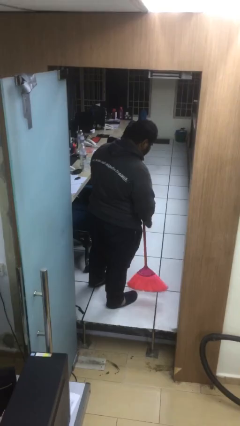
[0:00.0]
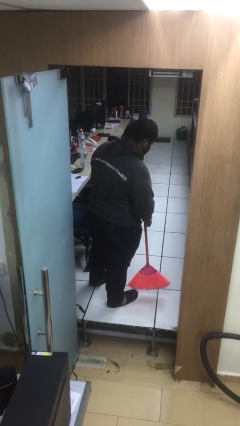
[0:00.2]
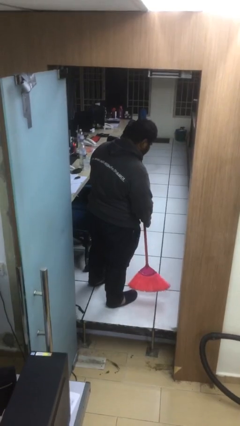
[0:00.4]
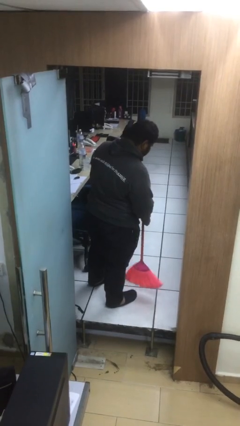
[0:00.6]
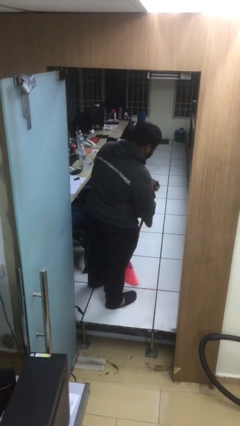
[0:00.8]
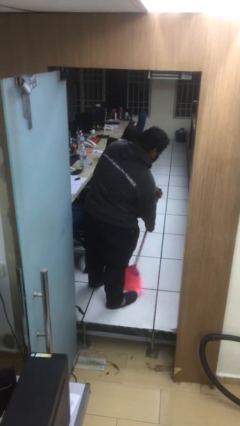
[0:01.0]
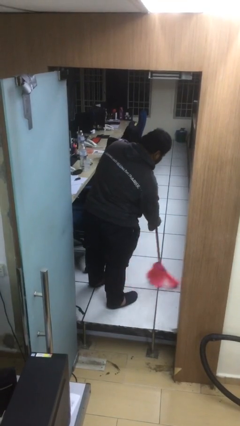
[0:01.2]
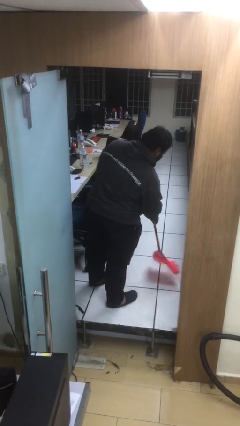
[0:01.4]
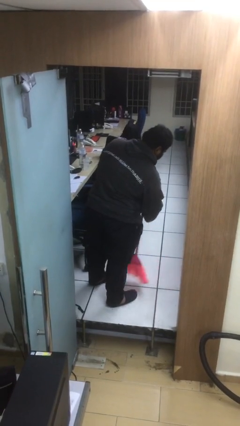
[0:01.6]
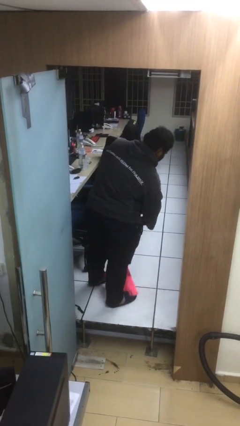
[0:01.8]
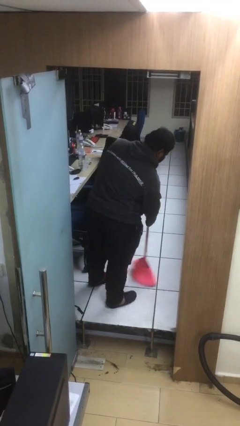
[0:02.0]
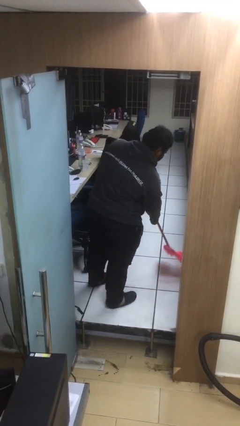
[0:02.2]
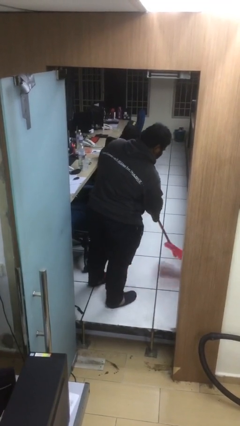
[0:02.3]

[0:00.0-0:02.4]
person sweeps floor

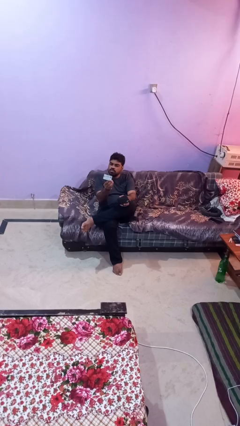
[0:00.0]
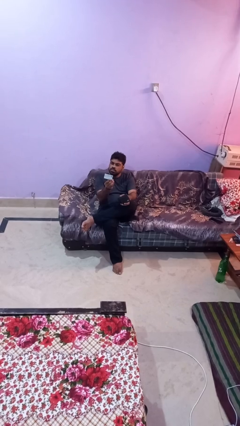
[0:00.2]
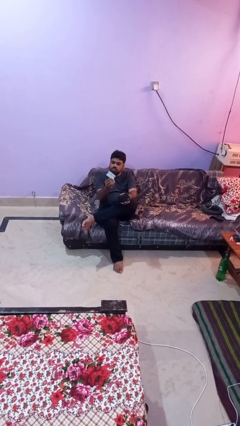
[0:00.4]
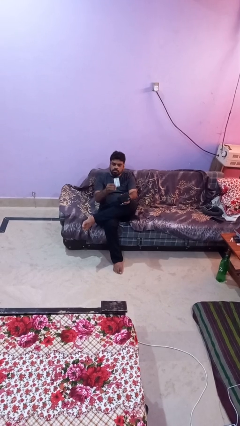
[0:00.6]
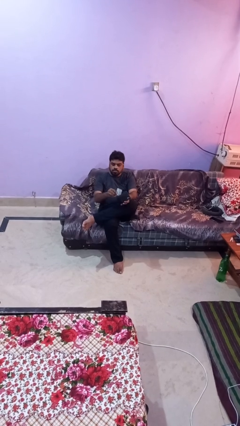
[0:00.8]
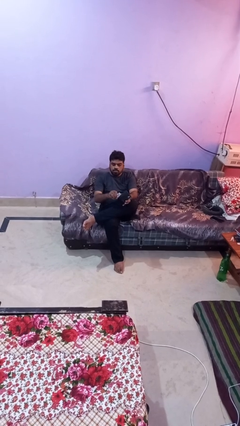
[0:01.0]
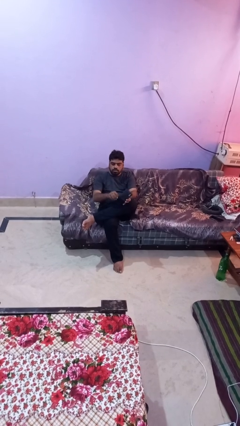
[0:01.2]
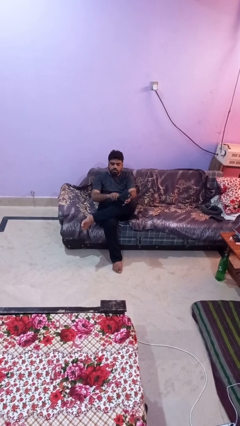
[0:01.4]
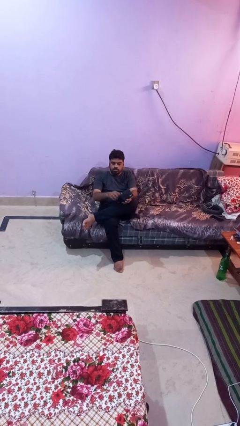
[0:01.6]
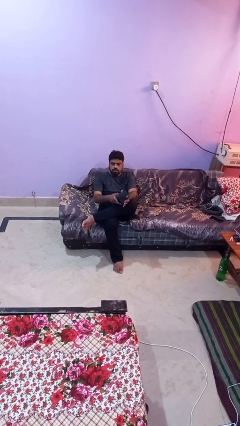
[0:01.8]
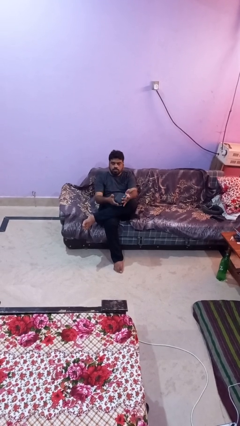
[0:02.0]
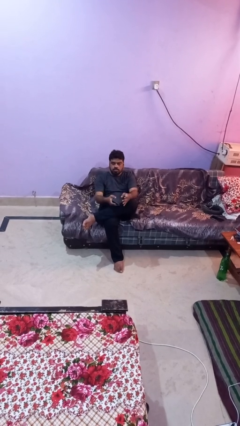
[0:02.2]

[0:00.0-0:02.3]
person puts object into purse

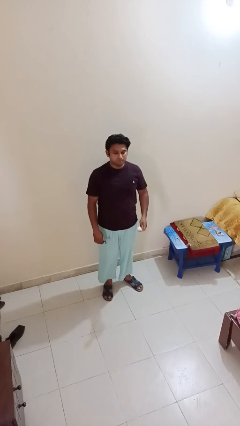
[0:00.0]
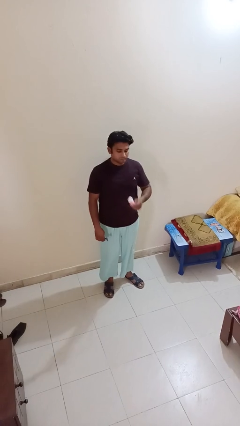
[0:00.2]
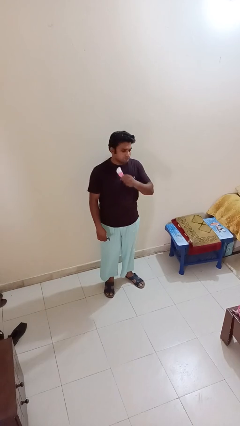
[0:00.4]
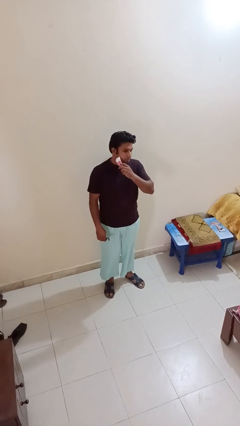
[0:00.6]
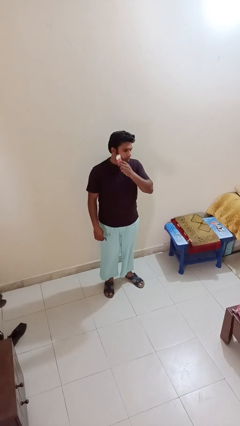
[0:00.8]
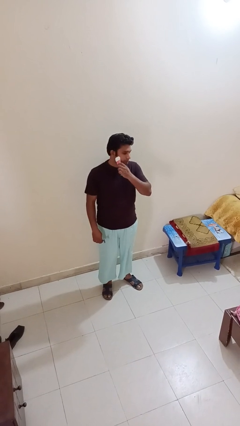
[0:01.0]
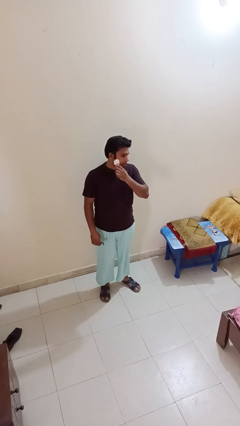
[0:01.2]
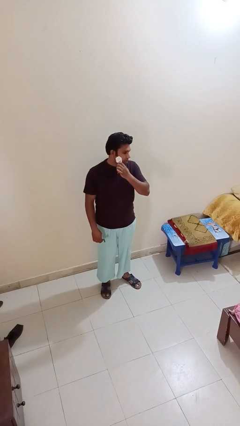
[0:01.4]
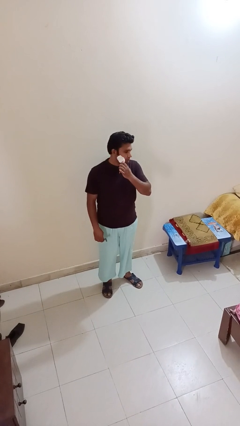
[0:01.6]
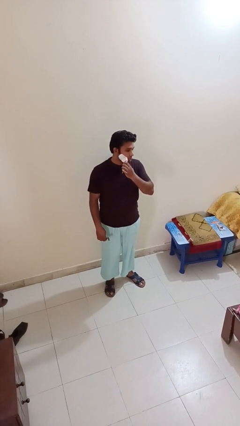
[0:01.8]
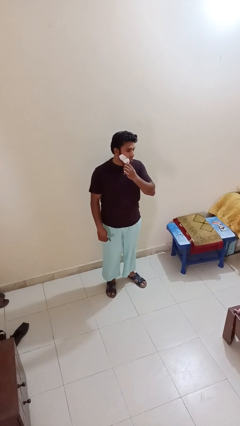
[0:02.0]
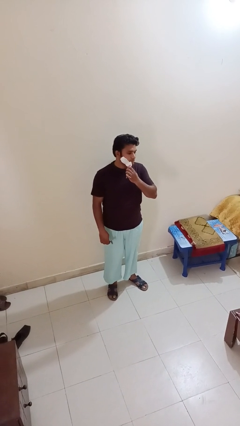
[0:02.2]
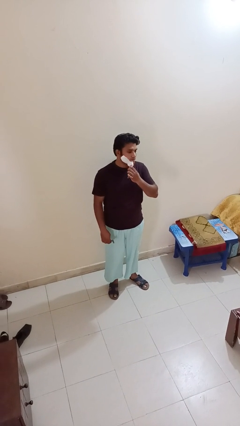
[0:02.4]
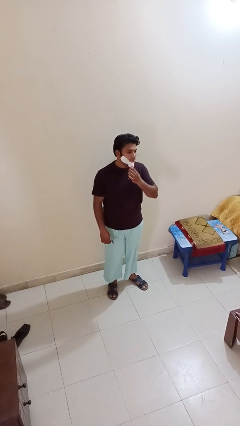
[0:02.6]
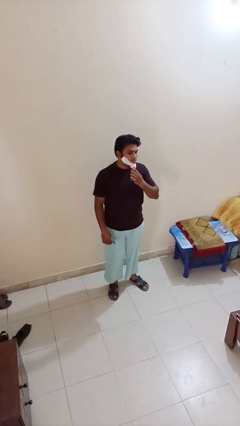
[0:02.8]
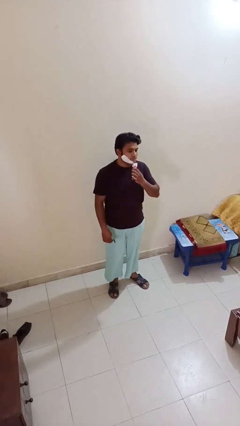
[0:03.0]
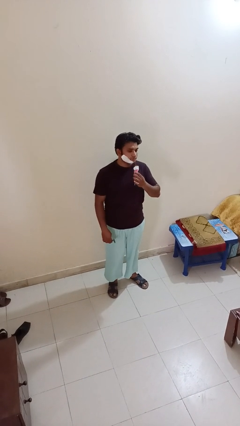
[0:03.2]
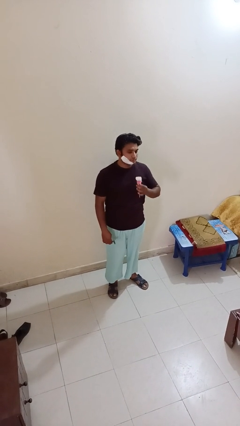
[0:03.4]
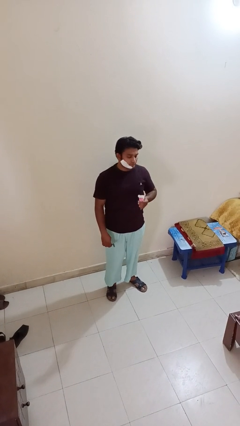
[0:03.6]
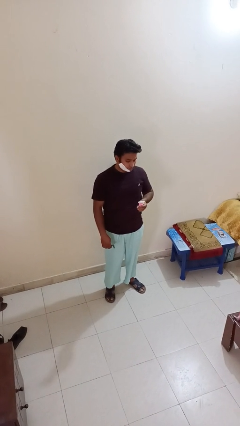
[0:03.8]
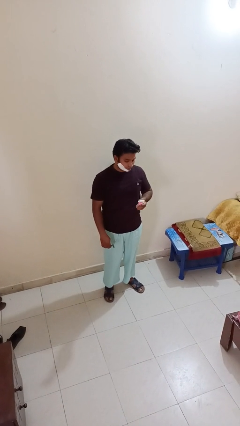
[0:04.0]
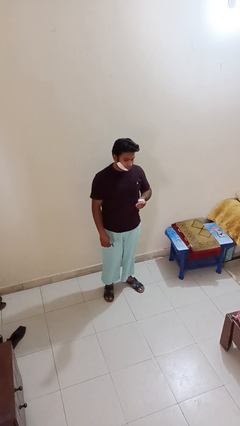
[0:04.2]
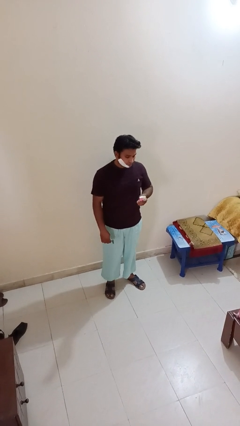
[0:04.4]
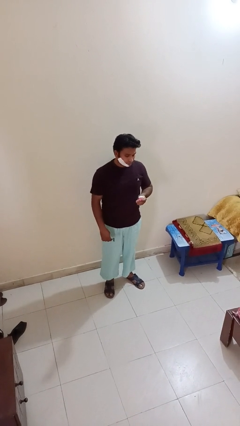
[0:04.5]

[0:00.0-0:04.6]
person applies shaving cream

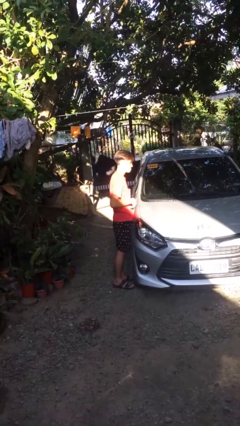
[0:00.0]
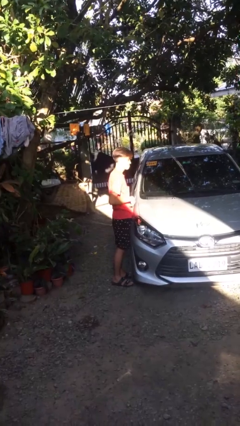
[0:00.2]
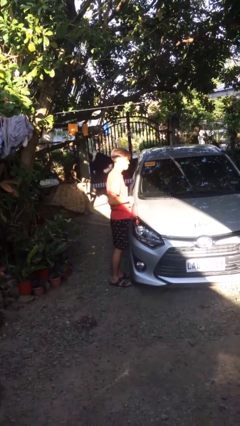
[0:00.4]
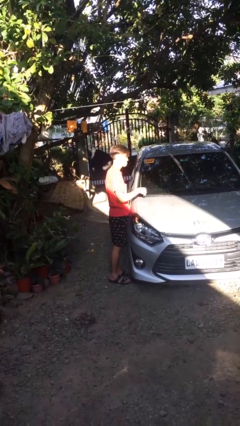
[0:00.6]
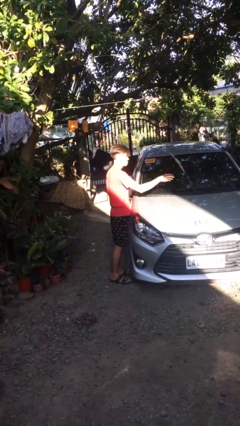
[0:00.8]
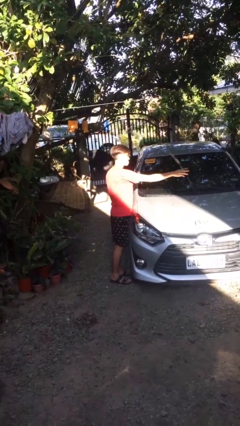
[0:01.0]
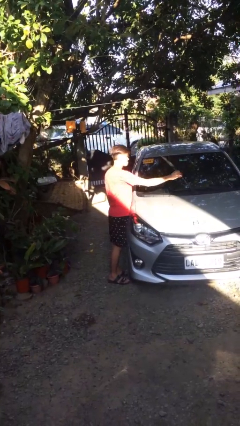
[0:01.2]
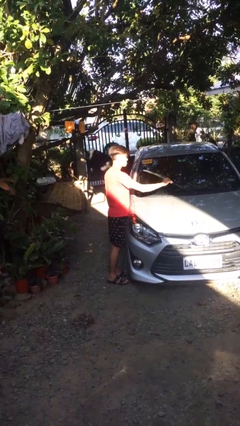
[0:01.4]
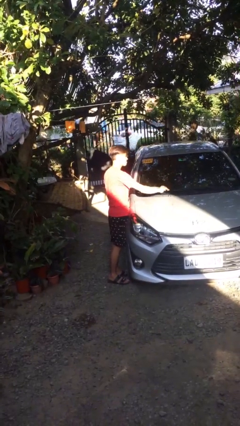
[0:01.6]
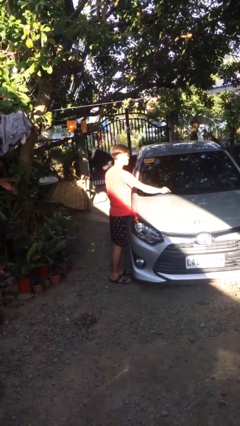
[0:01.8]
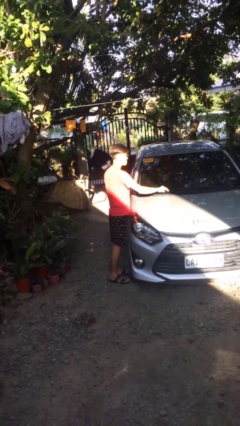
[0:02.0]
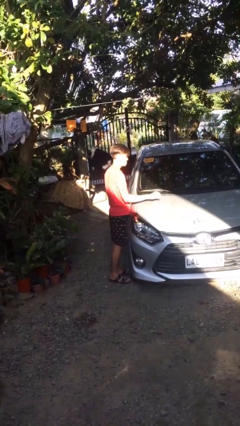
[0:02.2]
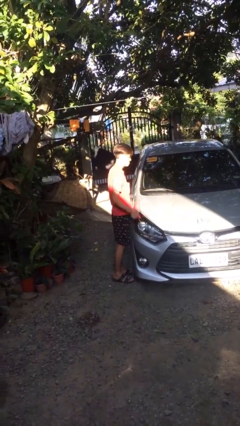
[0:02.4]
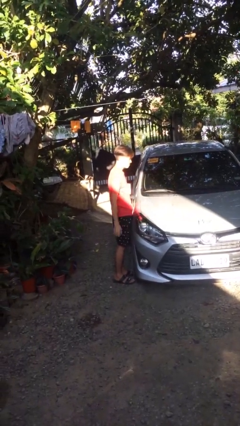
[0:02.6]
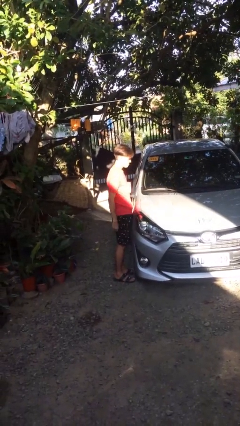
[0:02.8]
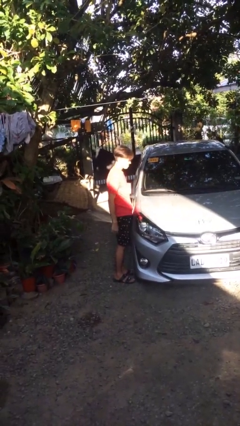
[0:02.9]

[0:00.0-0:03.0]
person flips down car wipers

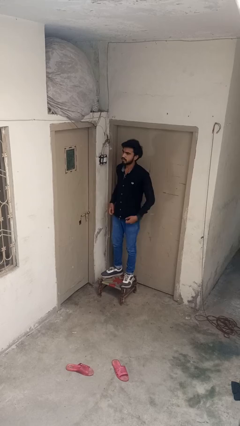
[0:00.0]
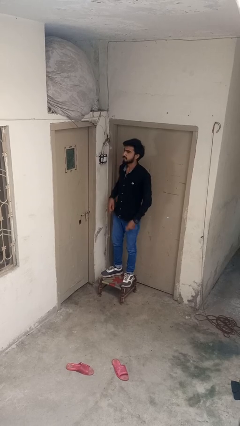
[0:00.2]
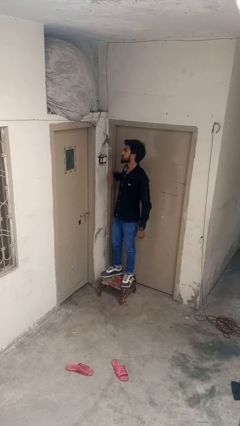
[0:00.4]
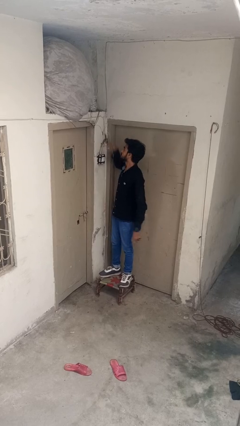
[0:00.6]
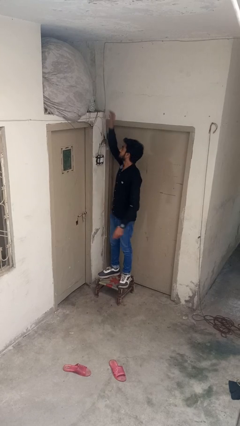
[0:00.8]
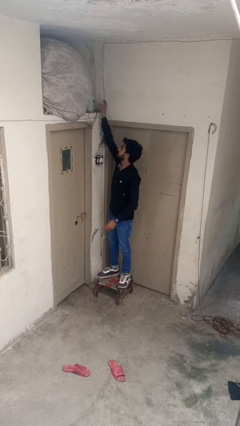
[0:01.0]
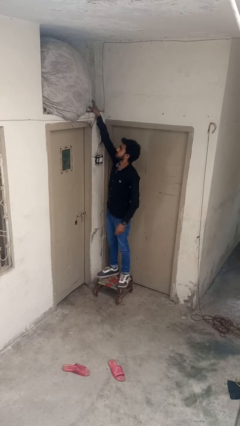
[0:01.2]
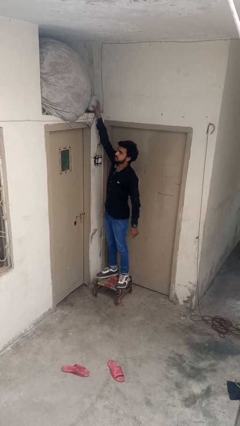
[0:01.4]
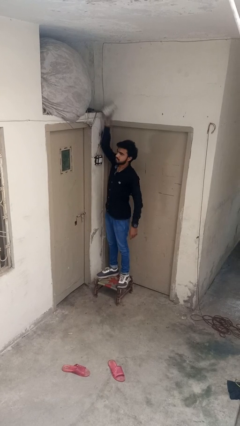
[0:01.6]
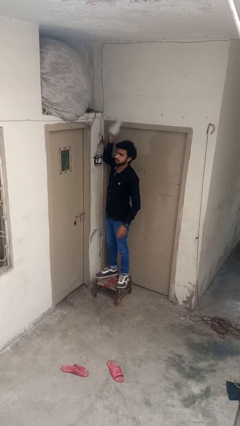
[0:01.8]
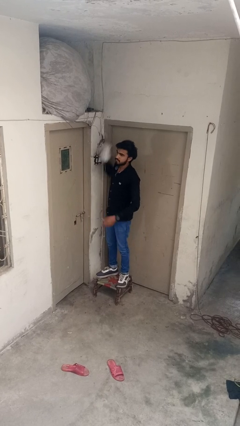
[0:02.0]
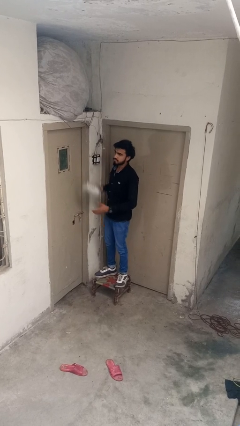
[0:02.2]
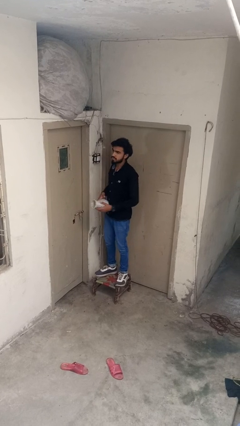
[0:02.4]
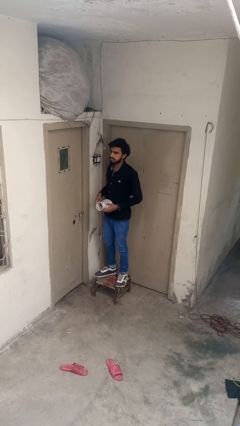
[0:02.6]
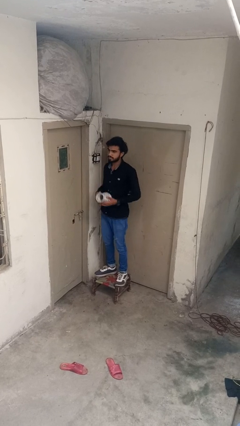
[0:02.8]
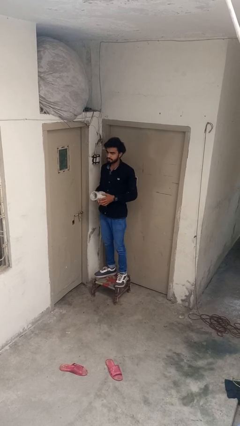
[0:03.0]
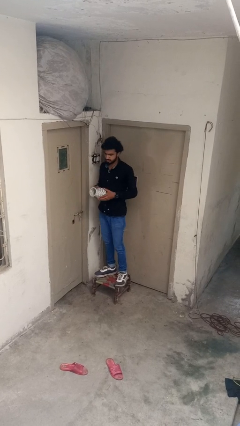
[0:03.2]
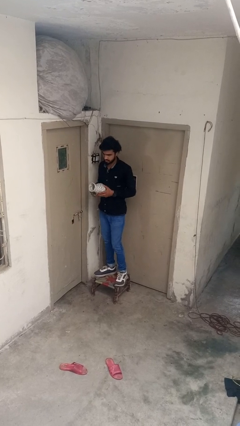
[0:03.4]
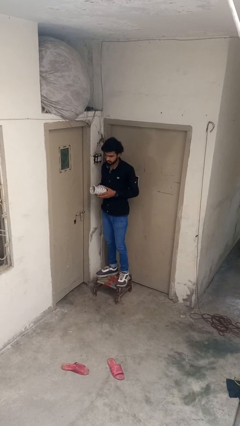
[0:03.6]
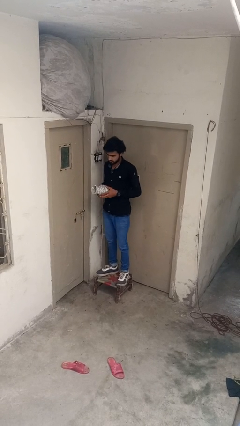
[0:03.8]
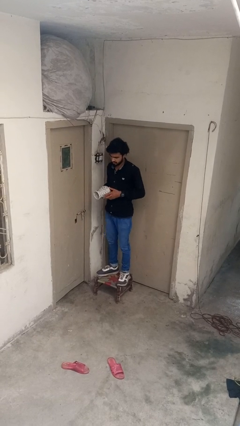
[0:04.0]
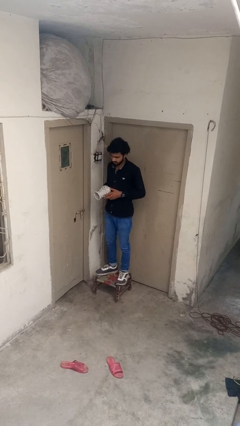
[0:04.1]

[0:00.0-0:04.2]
person picks up object from shelf

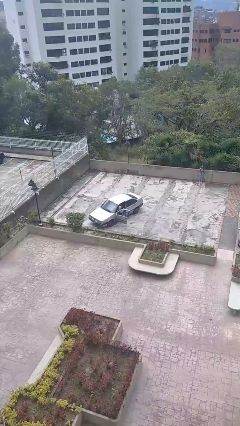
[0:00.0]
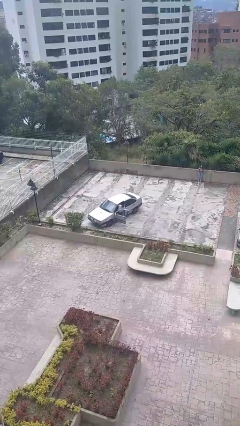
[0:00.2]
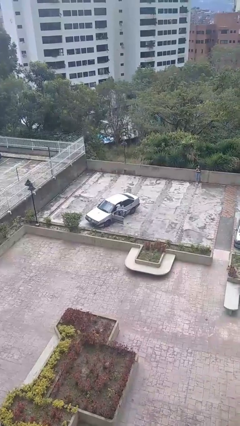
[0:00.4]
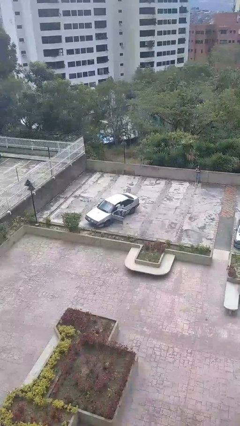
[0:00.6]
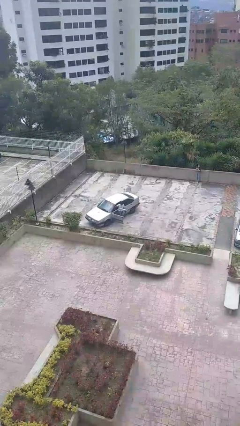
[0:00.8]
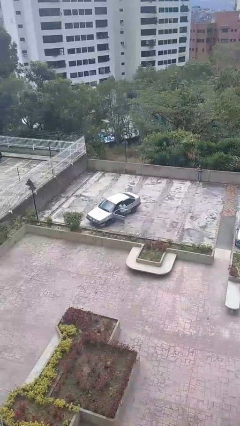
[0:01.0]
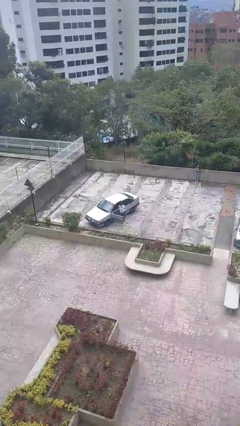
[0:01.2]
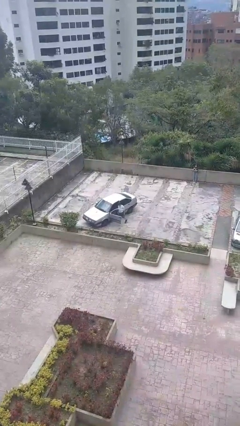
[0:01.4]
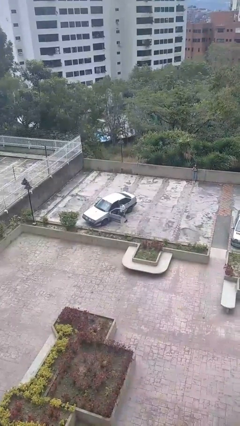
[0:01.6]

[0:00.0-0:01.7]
person exits car
